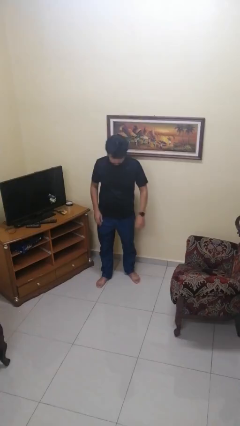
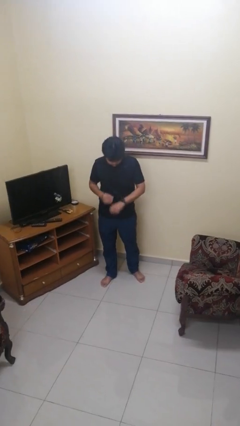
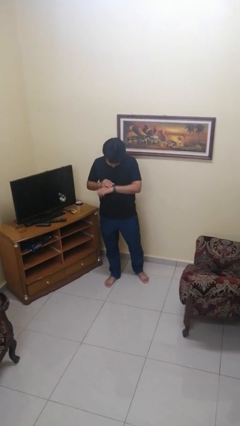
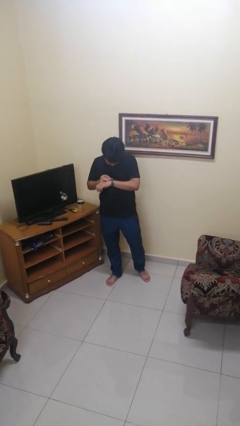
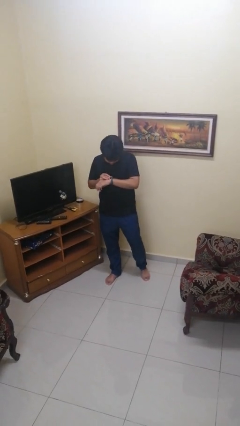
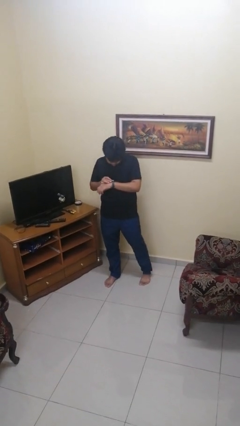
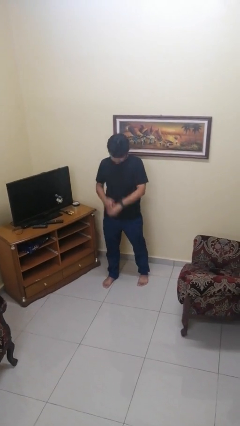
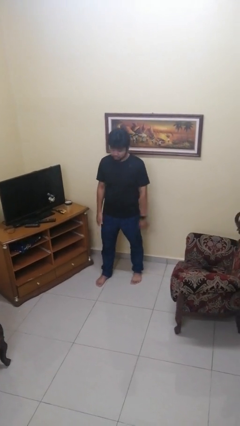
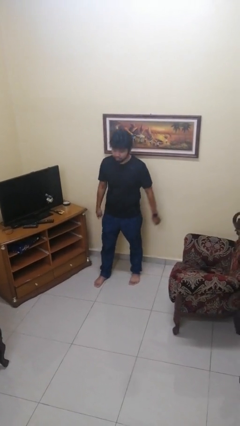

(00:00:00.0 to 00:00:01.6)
person looks at wristwatch

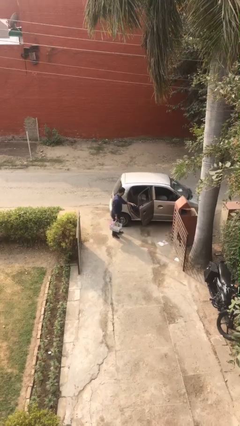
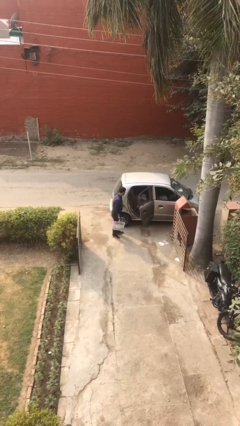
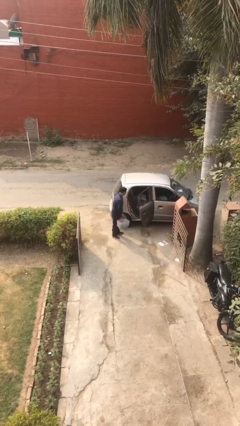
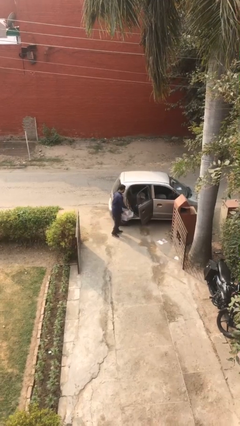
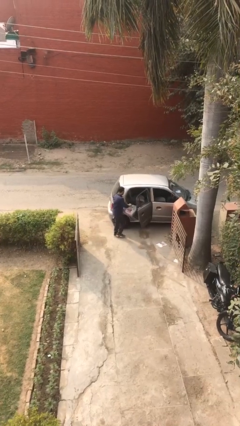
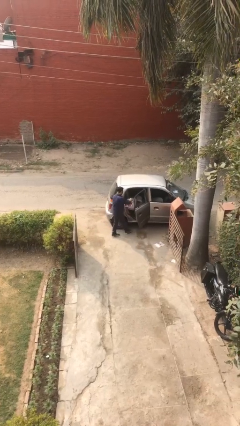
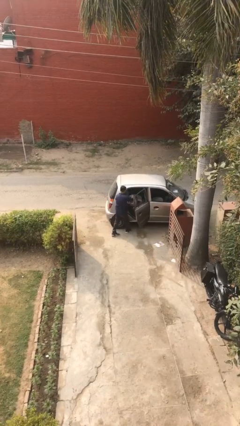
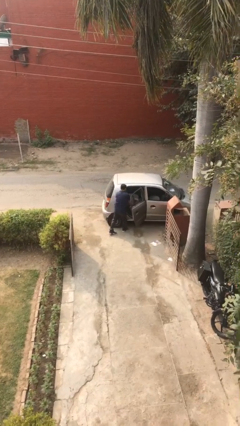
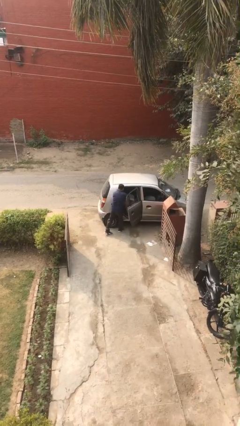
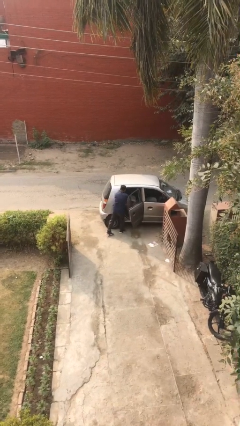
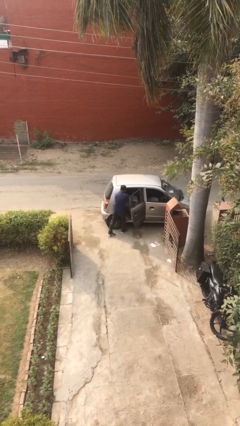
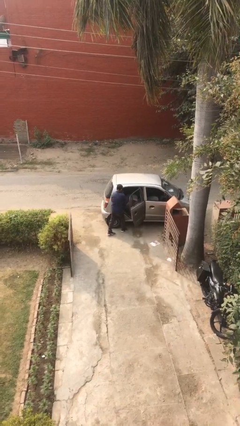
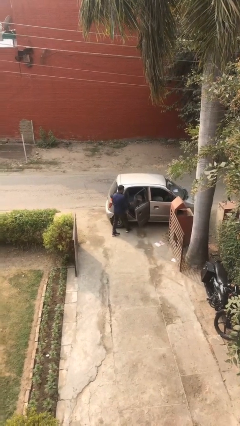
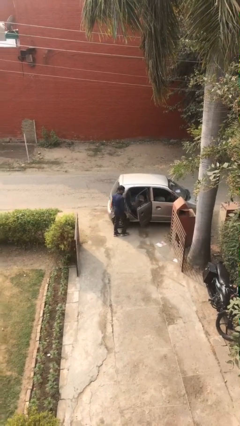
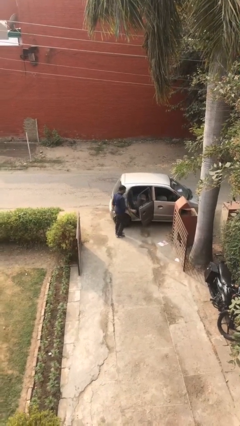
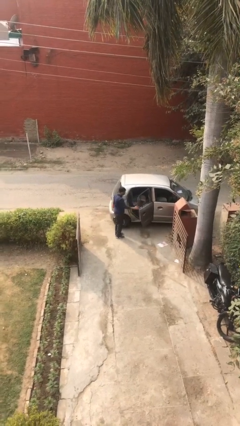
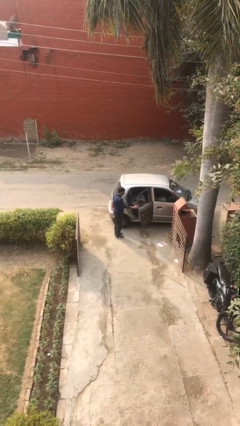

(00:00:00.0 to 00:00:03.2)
person loads car

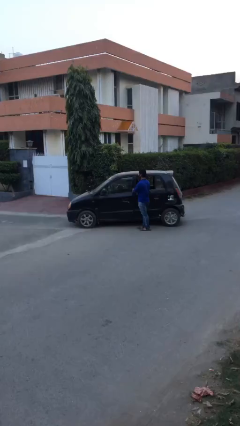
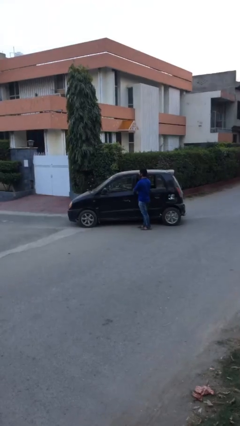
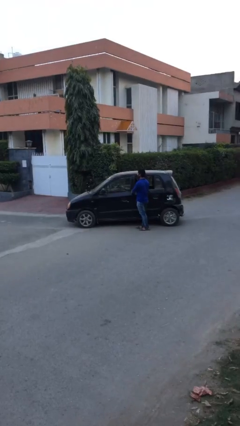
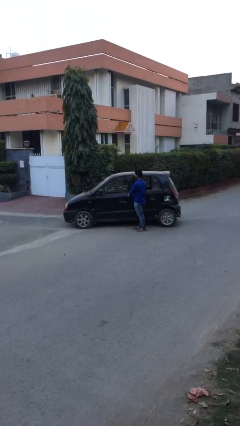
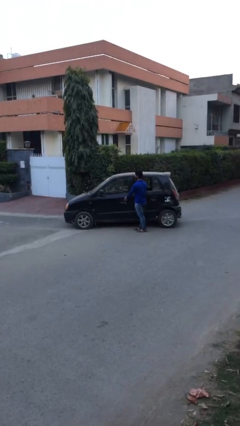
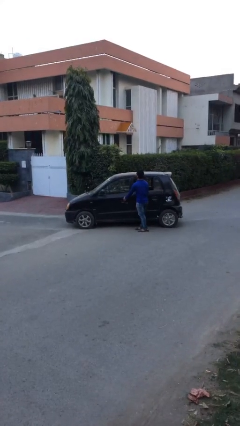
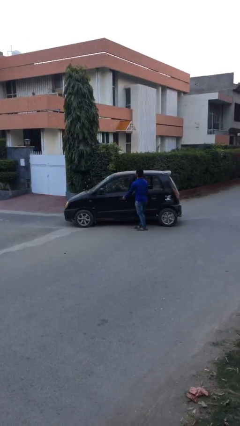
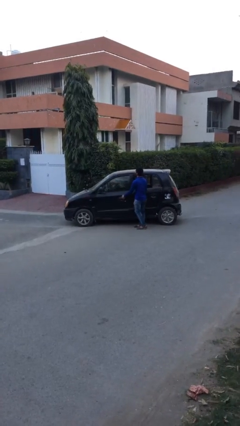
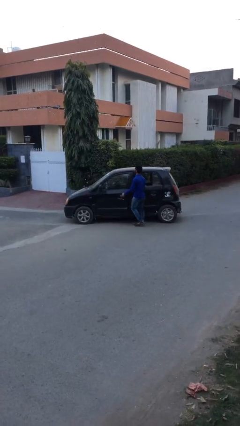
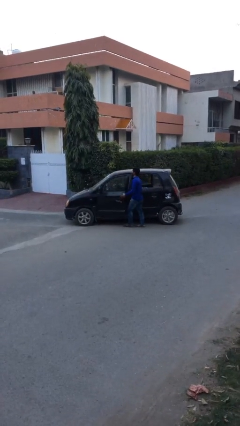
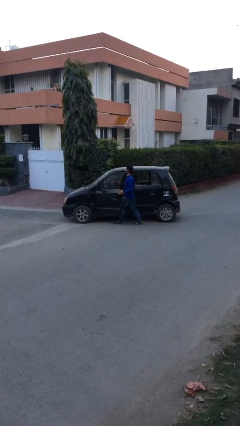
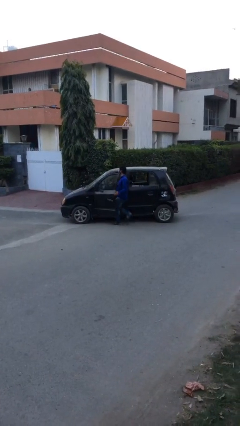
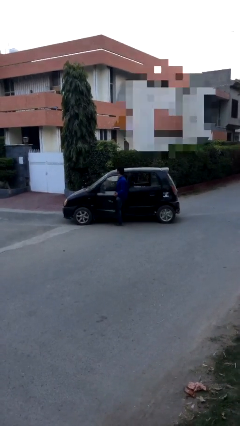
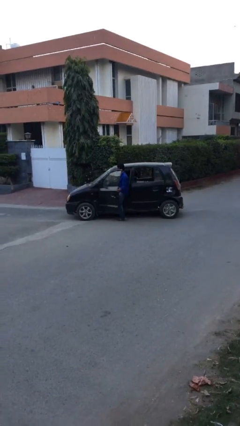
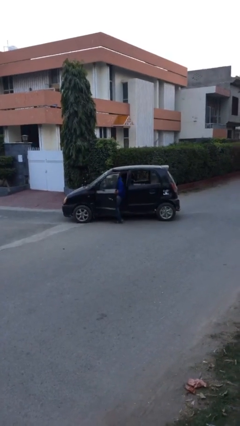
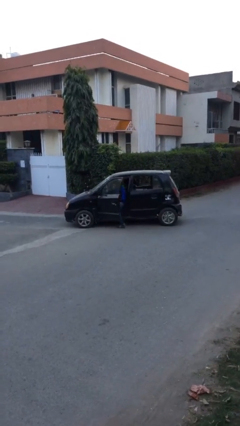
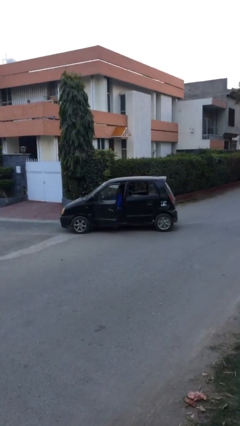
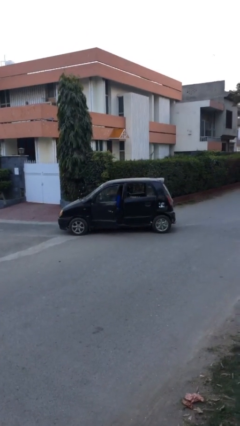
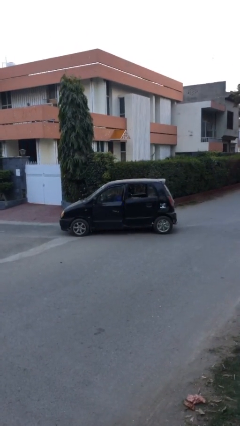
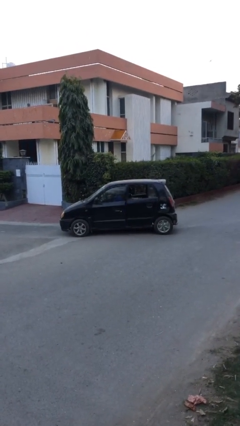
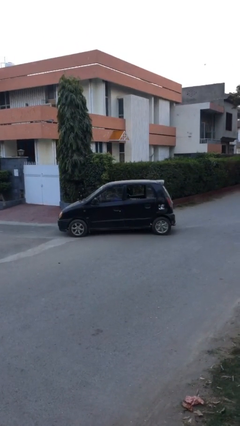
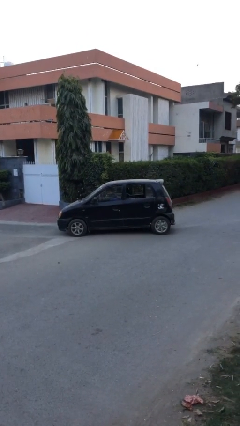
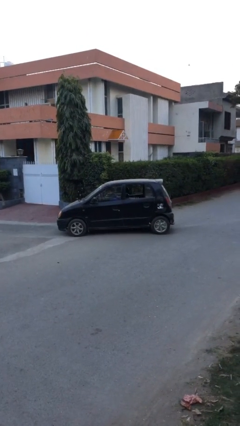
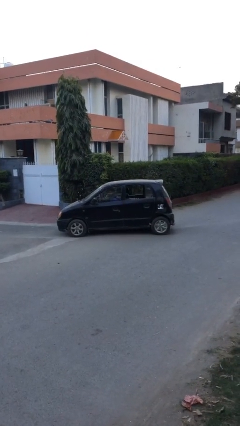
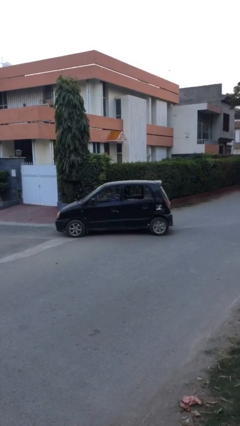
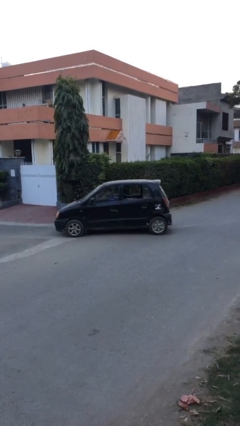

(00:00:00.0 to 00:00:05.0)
car picks up person

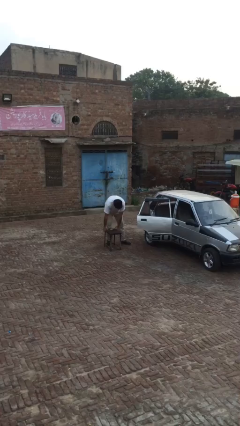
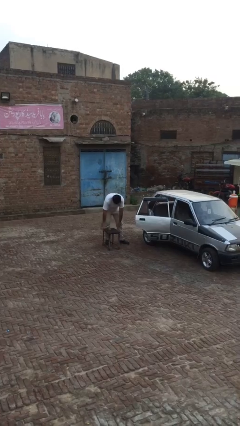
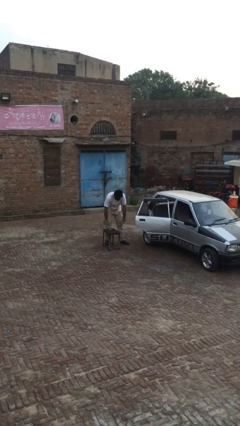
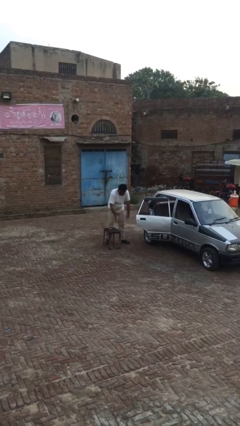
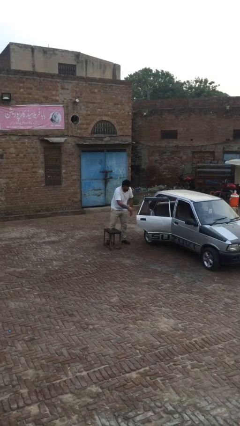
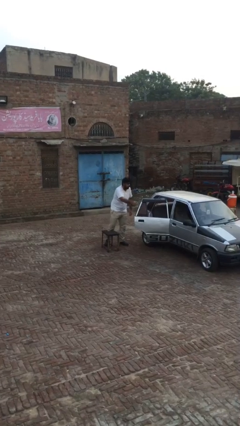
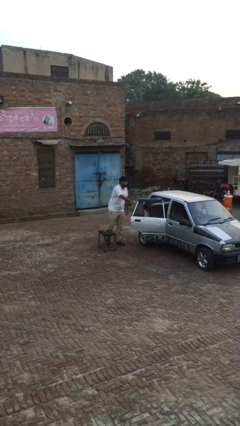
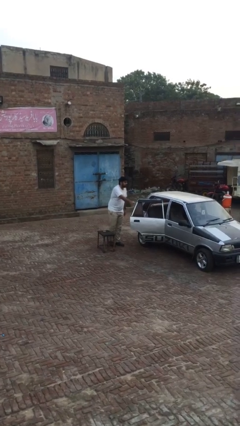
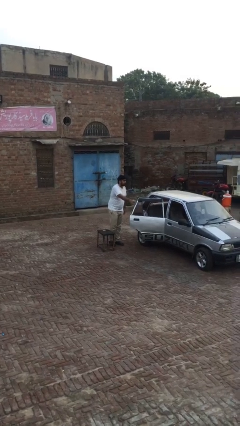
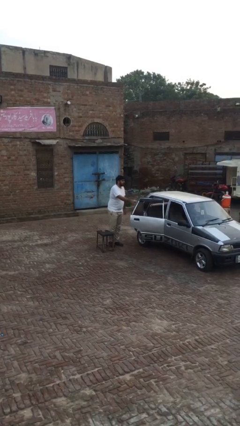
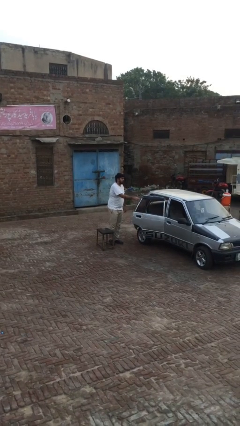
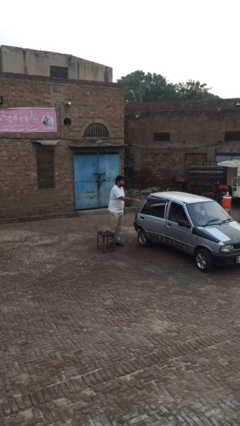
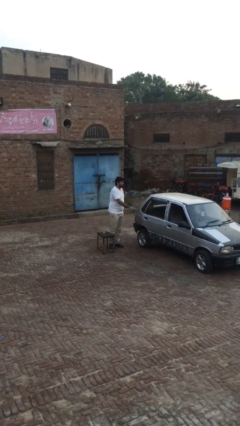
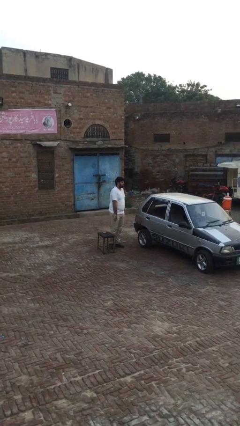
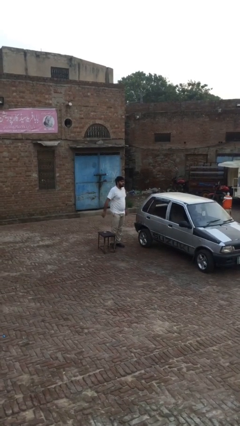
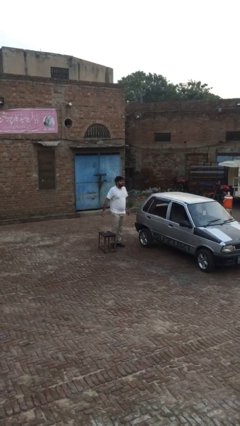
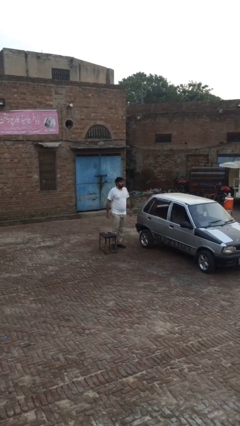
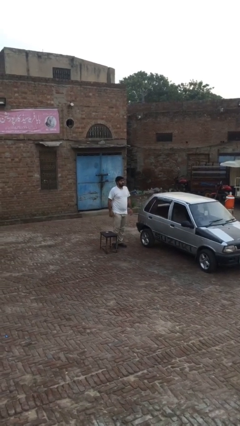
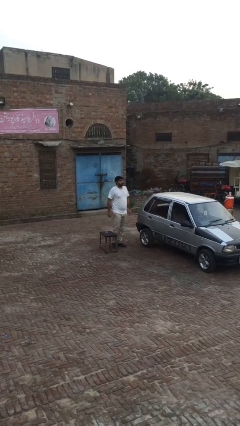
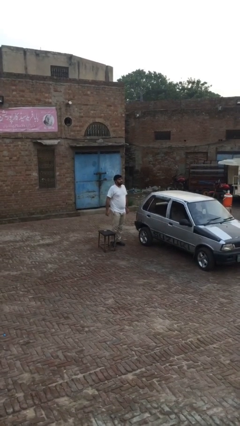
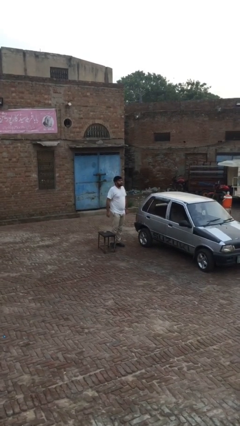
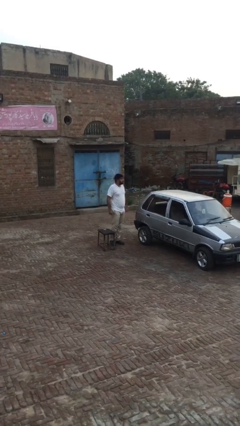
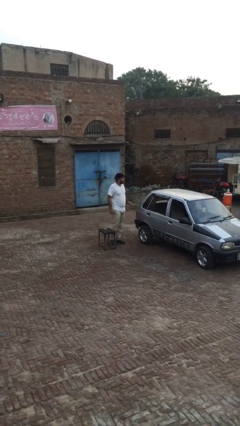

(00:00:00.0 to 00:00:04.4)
person closes car door

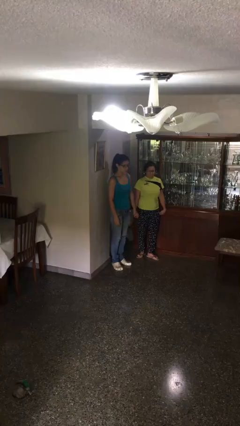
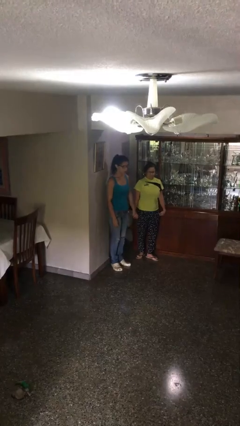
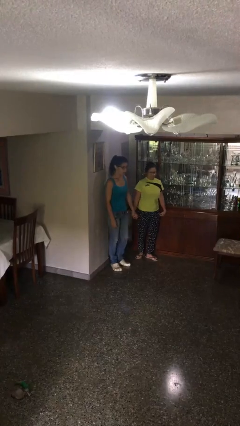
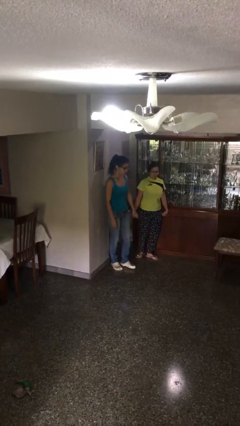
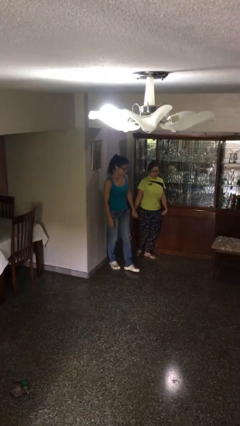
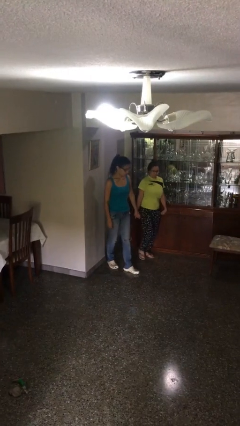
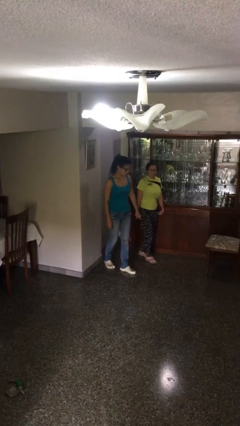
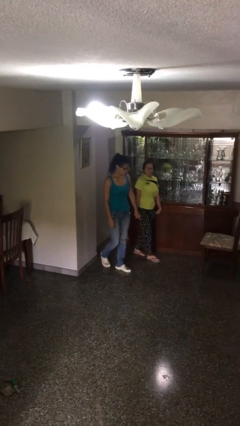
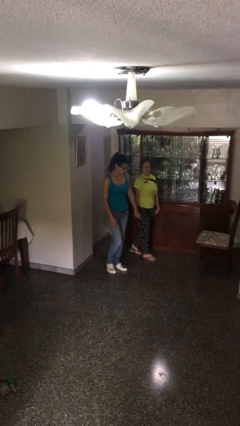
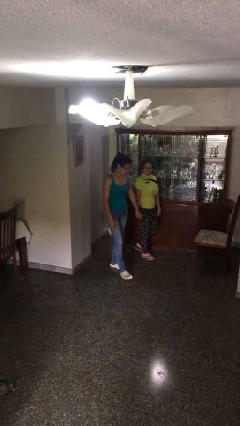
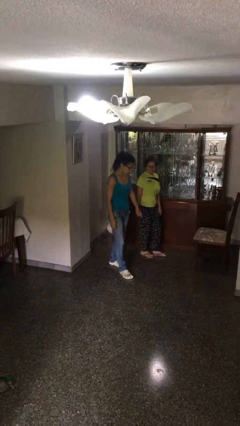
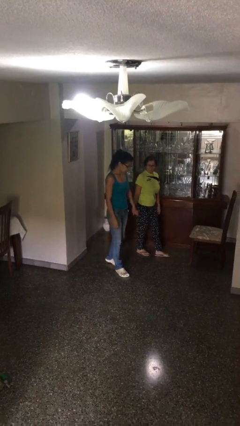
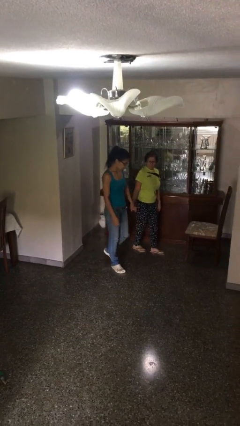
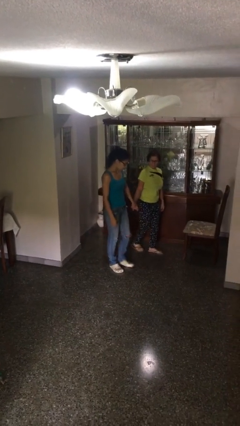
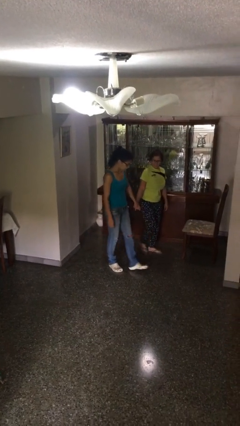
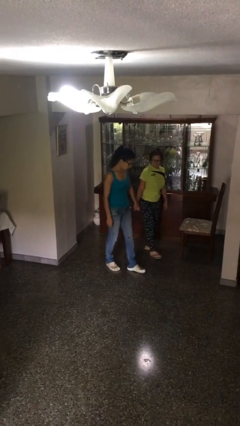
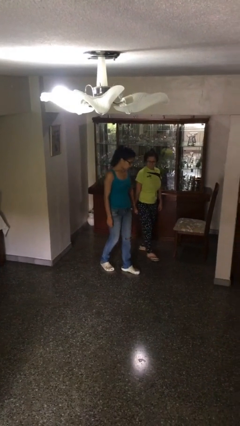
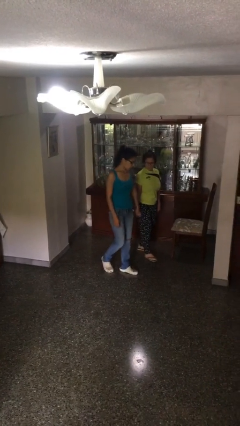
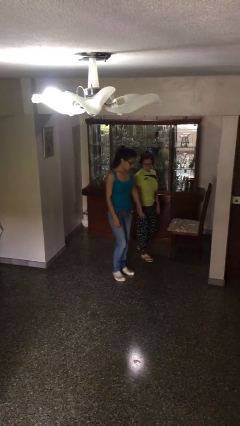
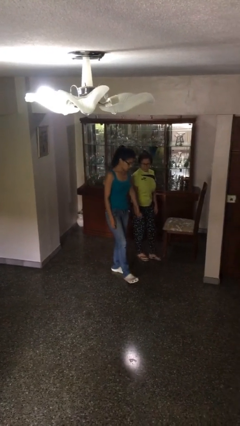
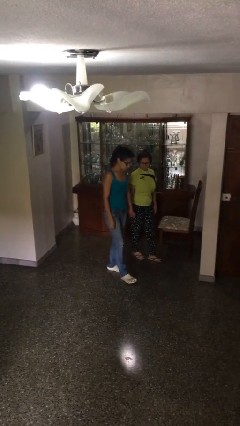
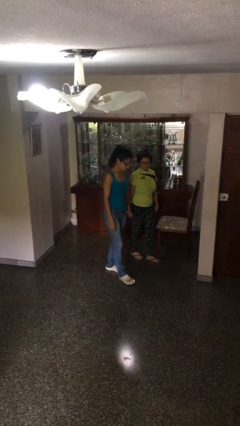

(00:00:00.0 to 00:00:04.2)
person holds hand
